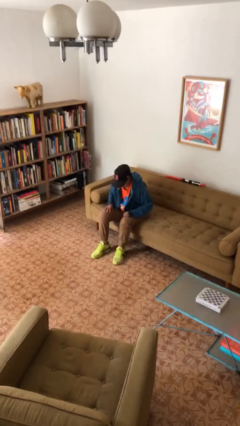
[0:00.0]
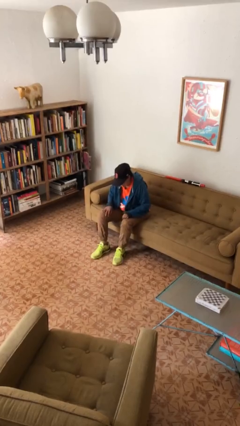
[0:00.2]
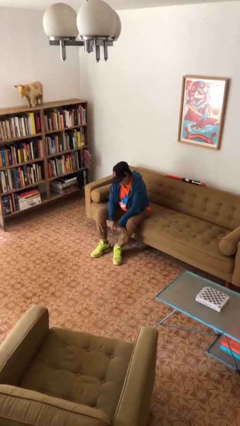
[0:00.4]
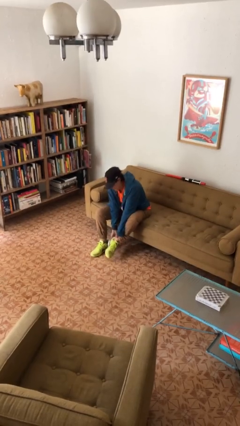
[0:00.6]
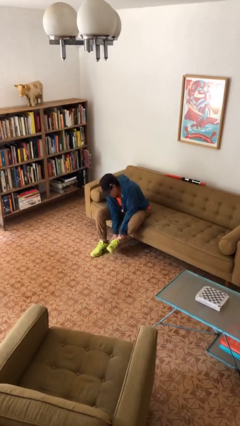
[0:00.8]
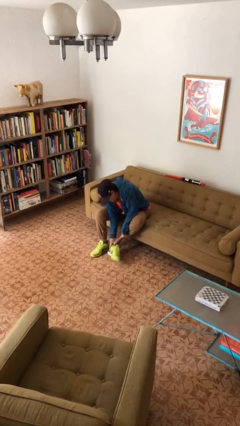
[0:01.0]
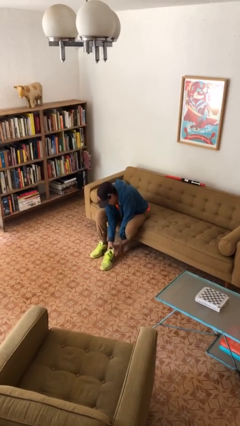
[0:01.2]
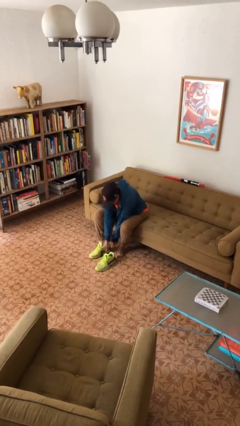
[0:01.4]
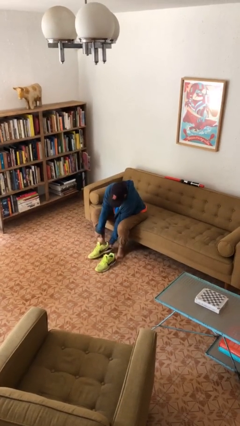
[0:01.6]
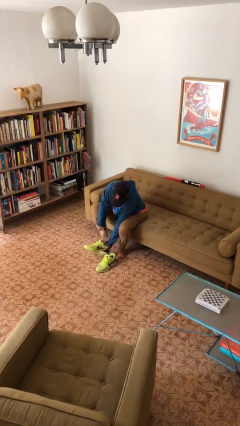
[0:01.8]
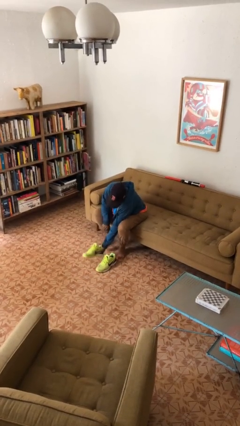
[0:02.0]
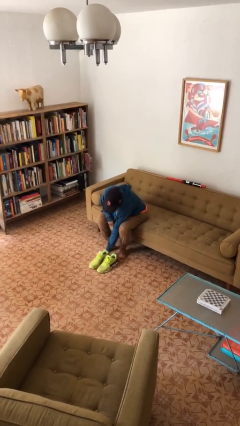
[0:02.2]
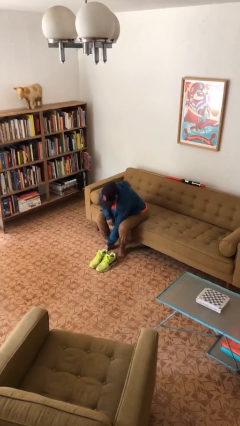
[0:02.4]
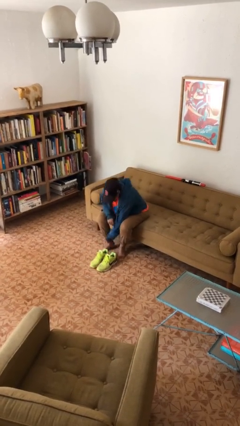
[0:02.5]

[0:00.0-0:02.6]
person takes off shoes

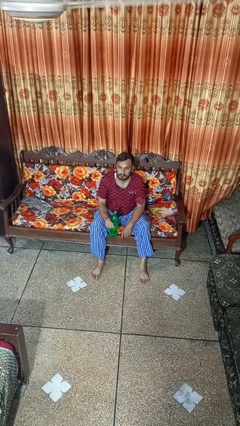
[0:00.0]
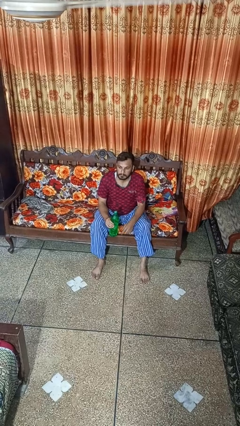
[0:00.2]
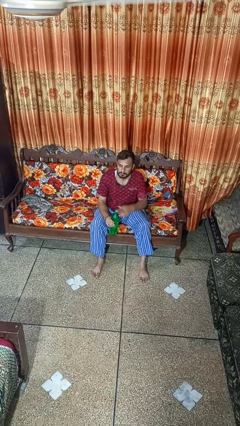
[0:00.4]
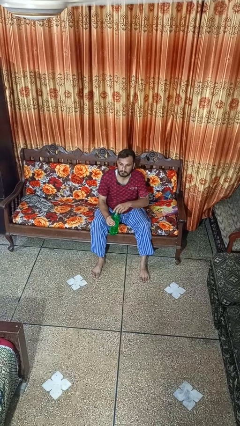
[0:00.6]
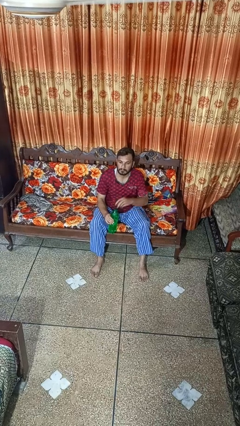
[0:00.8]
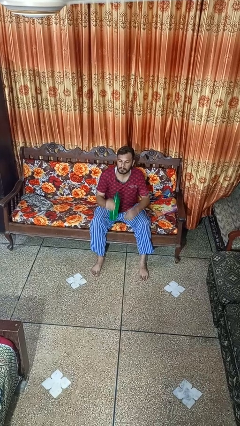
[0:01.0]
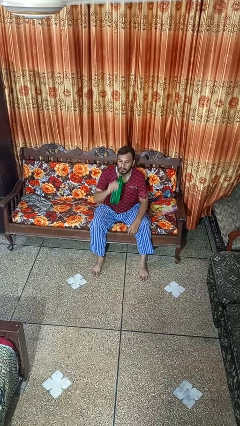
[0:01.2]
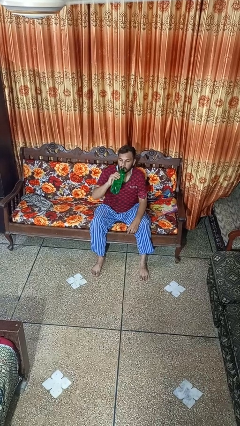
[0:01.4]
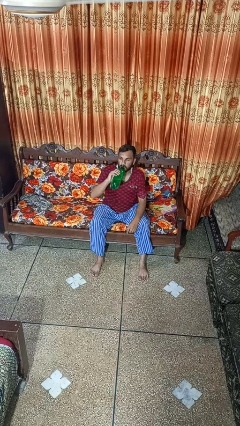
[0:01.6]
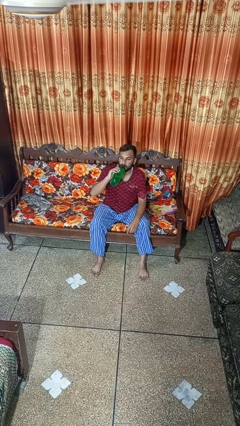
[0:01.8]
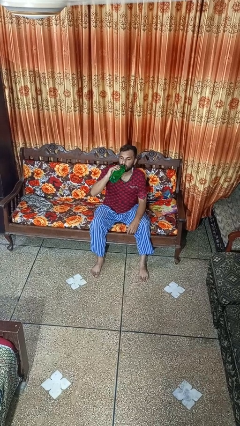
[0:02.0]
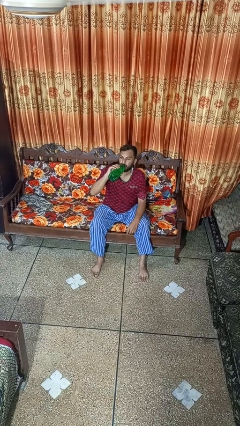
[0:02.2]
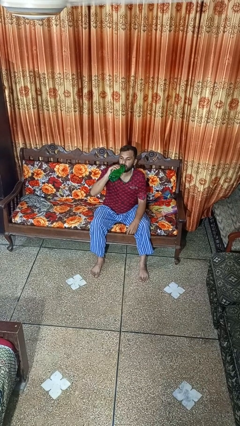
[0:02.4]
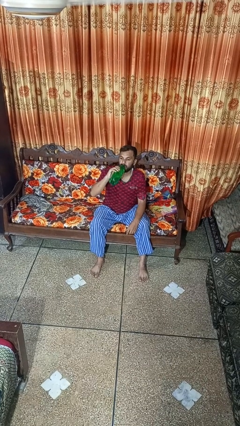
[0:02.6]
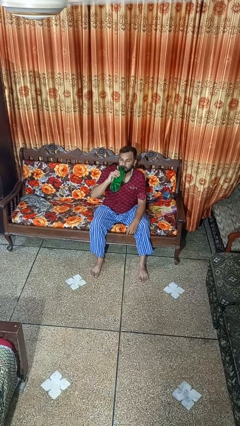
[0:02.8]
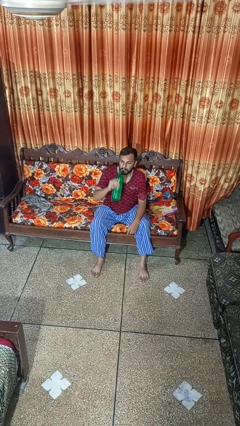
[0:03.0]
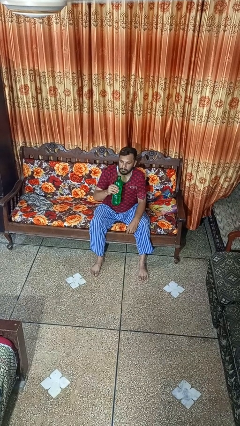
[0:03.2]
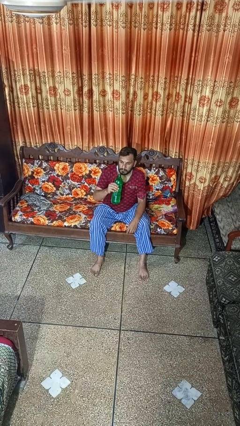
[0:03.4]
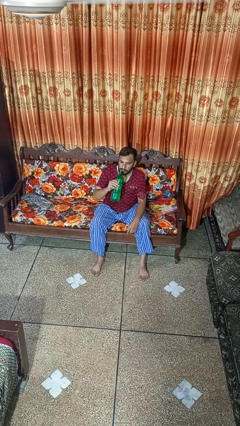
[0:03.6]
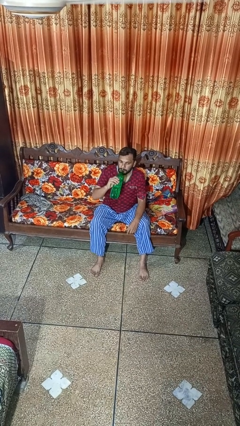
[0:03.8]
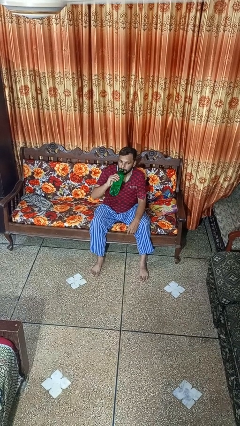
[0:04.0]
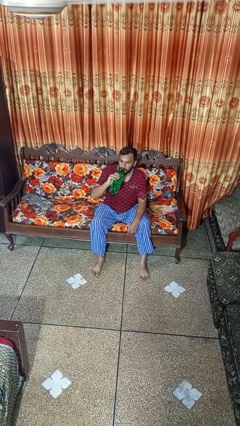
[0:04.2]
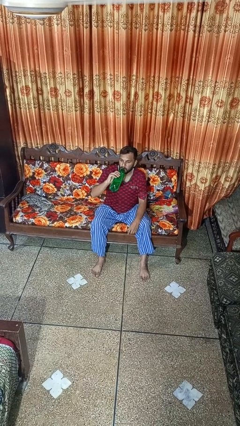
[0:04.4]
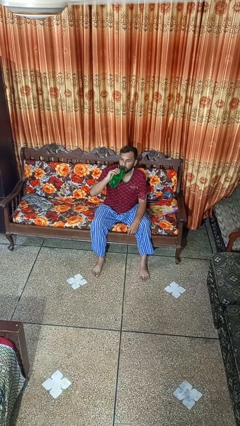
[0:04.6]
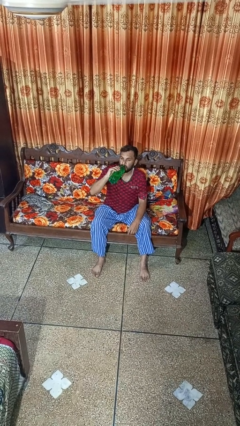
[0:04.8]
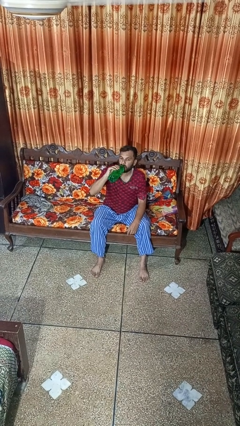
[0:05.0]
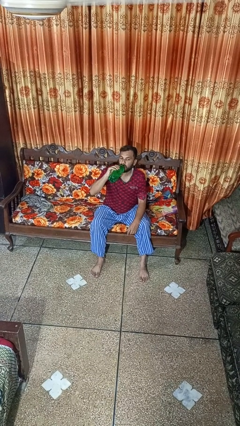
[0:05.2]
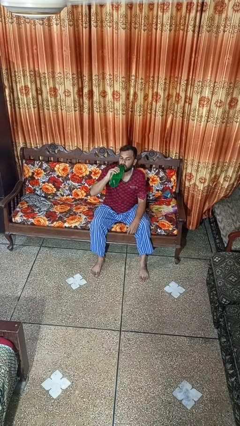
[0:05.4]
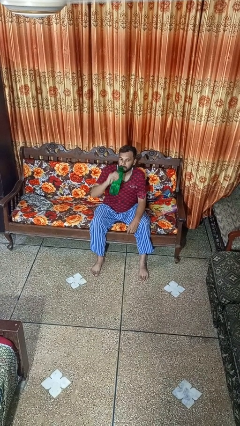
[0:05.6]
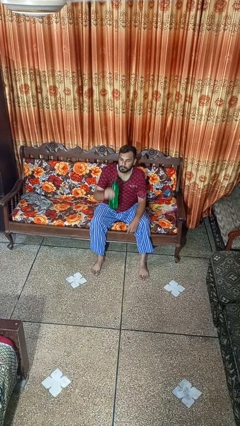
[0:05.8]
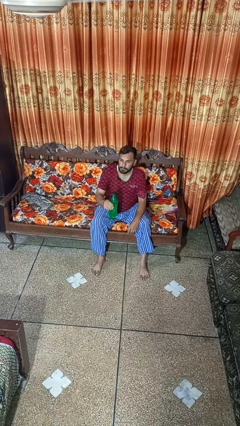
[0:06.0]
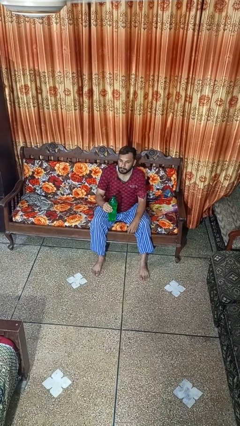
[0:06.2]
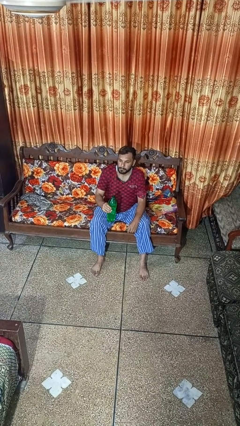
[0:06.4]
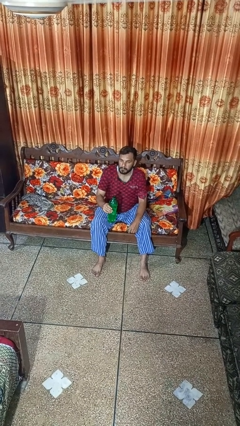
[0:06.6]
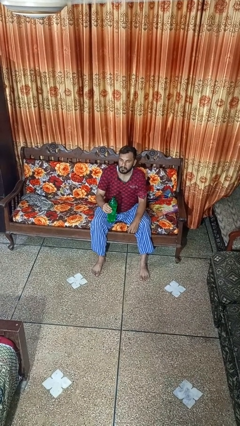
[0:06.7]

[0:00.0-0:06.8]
person drinks from bottle

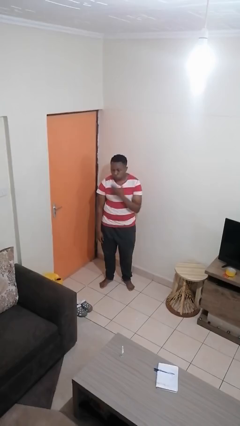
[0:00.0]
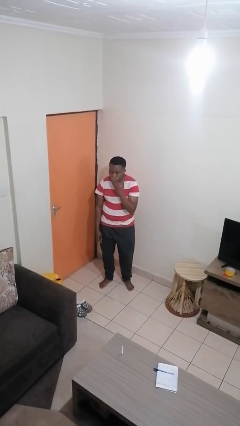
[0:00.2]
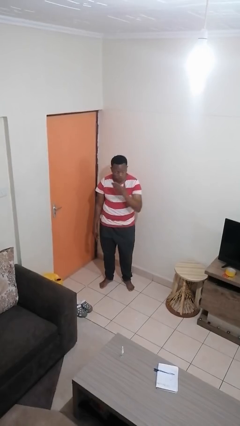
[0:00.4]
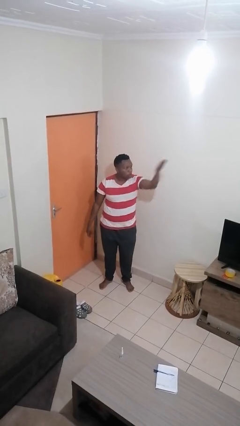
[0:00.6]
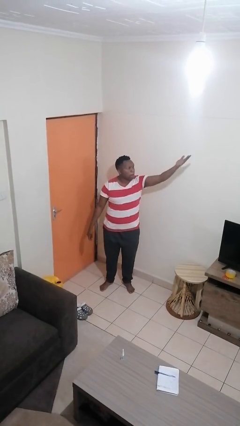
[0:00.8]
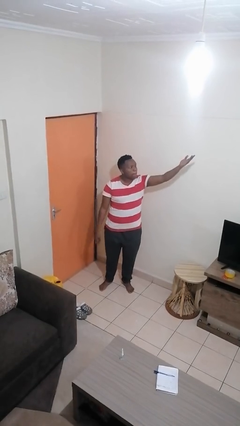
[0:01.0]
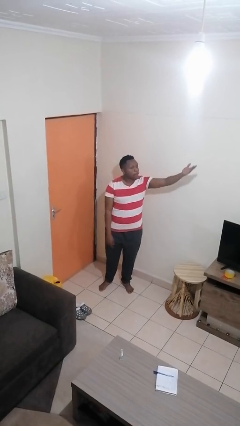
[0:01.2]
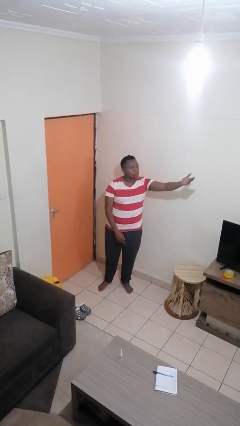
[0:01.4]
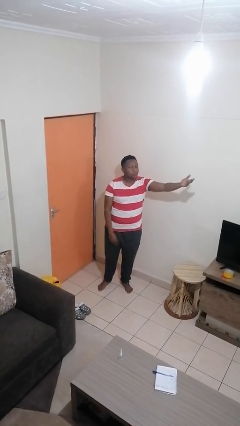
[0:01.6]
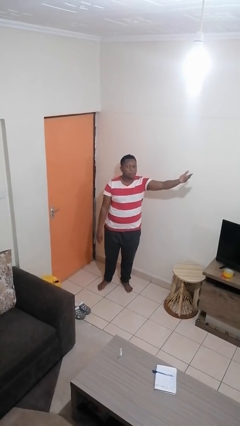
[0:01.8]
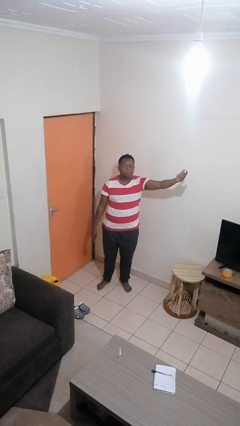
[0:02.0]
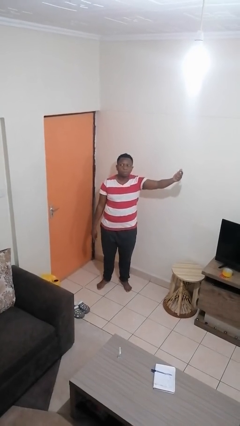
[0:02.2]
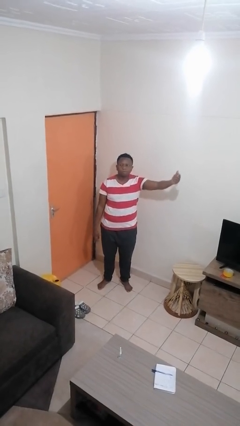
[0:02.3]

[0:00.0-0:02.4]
person gestures blow kiss

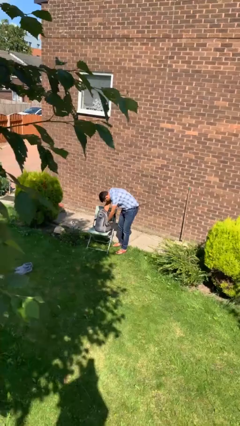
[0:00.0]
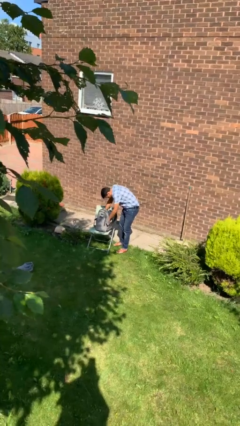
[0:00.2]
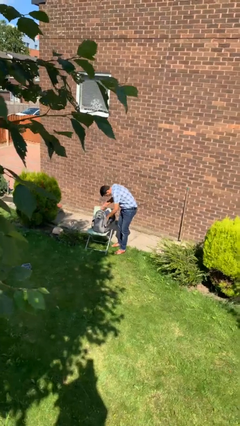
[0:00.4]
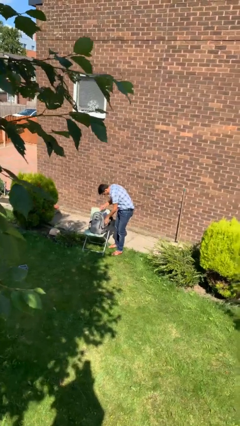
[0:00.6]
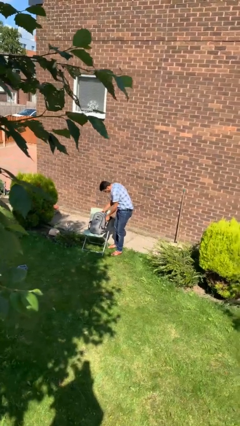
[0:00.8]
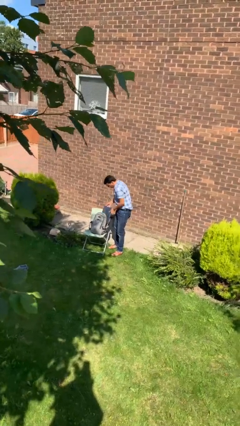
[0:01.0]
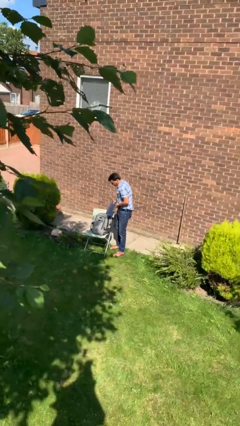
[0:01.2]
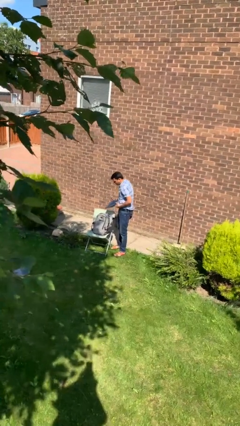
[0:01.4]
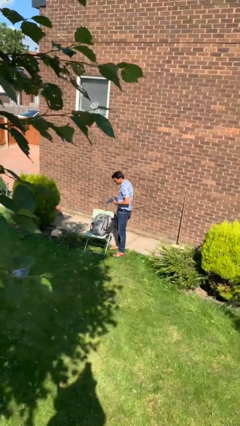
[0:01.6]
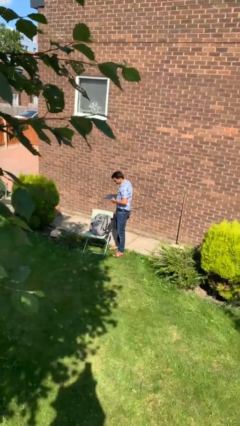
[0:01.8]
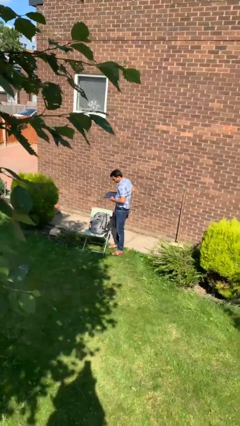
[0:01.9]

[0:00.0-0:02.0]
person takes object from backpack

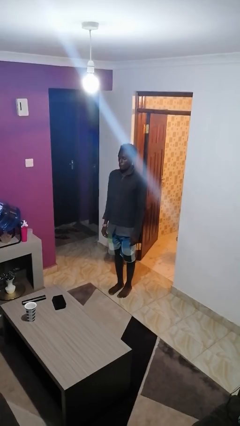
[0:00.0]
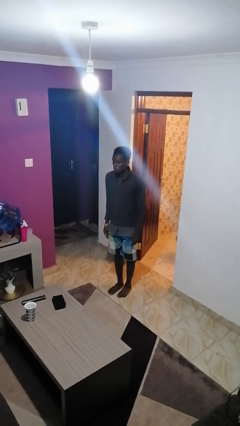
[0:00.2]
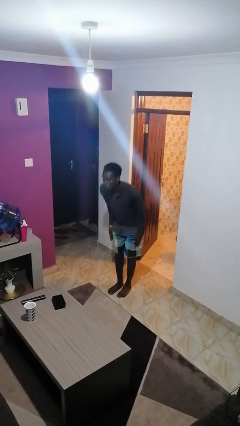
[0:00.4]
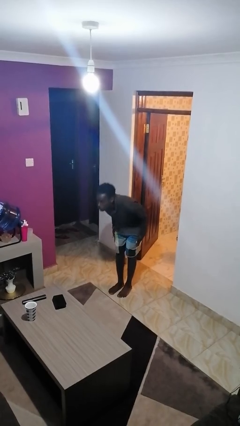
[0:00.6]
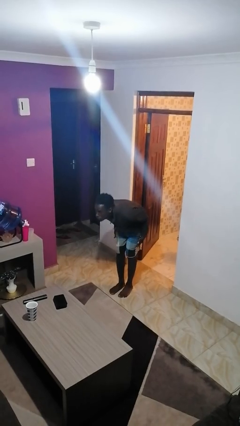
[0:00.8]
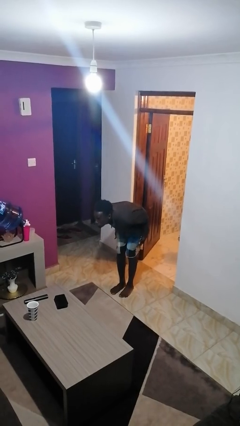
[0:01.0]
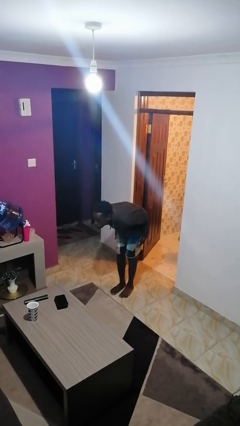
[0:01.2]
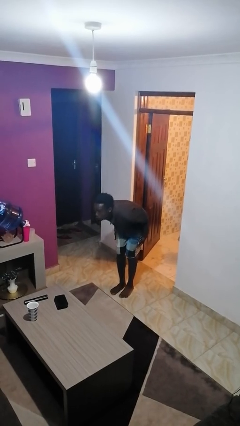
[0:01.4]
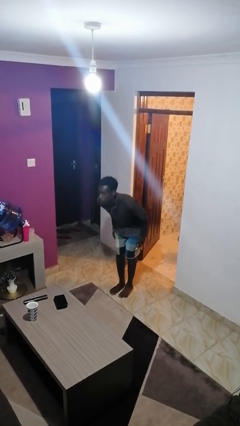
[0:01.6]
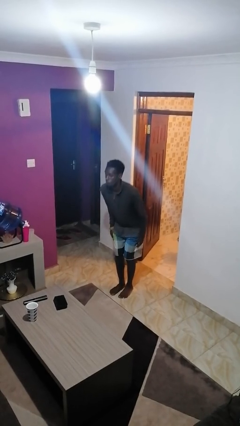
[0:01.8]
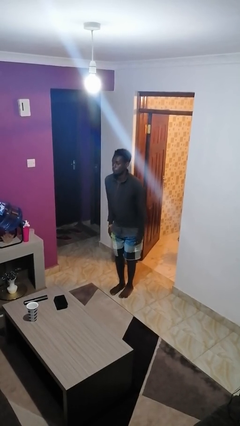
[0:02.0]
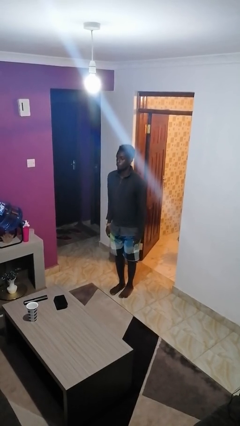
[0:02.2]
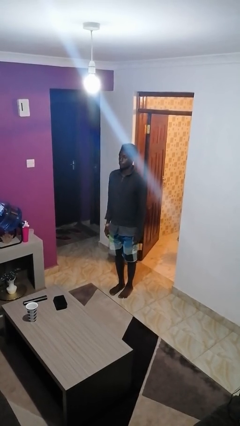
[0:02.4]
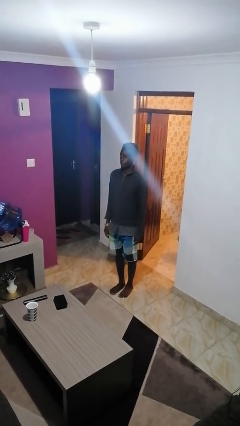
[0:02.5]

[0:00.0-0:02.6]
person bows
